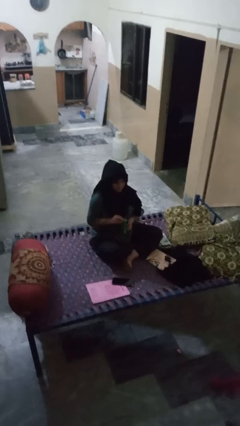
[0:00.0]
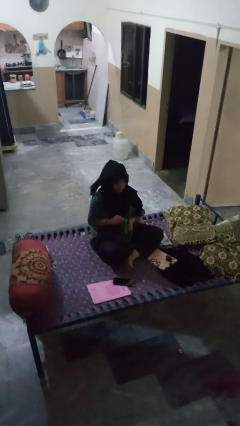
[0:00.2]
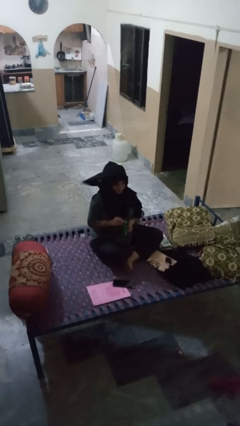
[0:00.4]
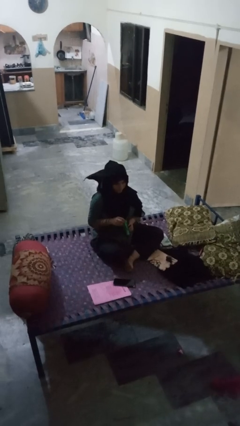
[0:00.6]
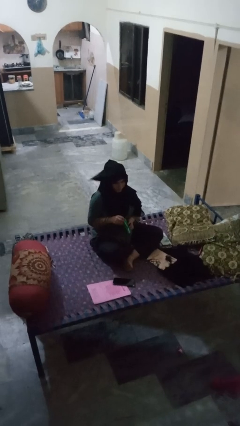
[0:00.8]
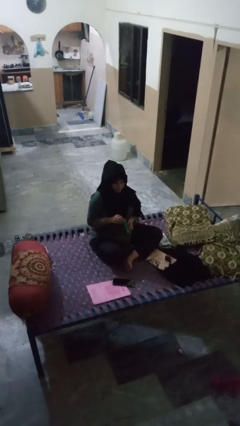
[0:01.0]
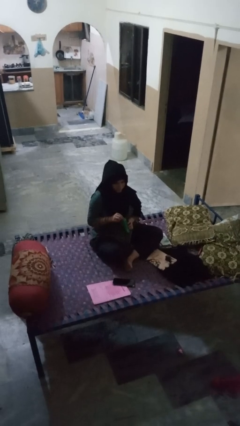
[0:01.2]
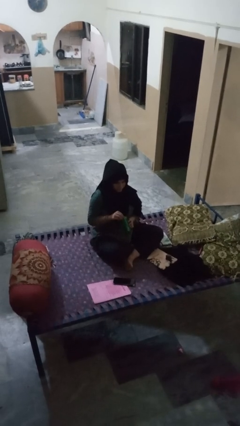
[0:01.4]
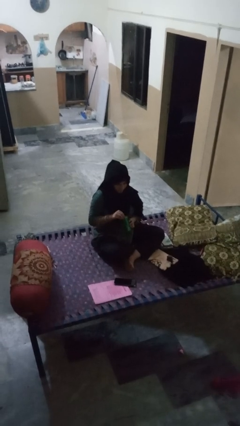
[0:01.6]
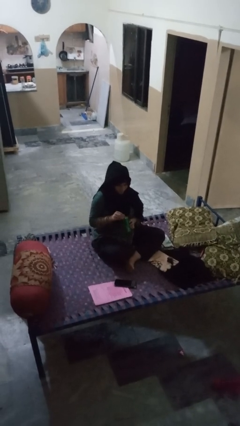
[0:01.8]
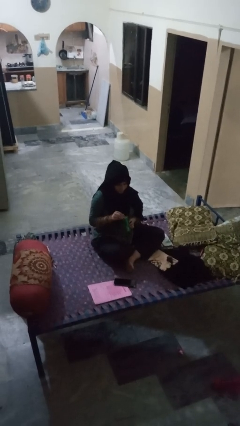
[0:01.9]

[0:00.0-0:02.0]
person opens can with can opener

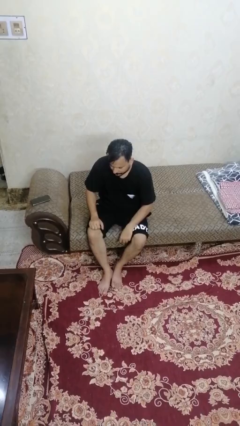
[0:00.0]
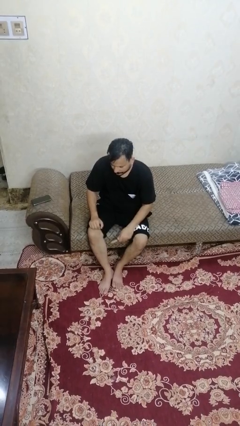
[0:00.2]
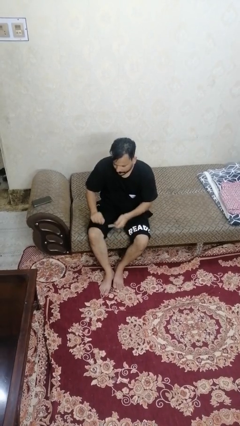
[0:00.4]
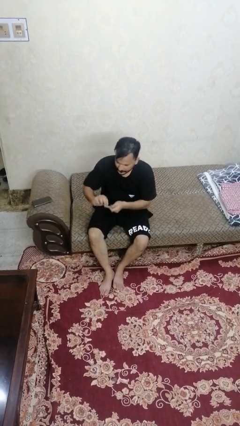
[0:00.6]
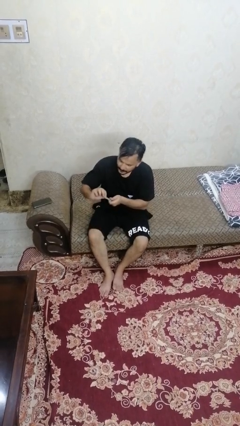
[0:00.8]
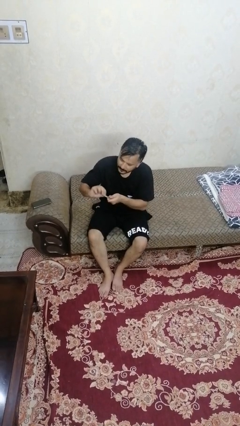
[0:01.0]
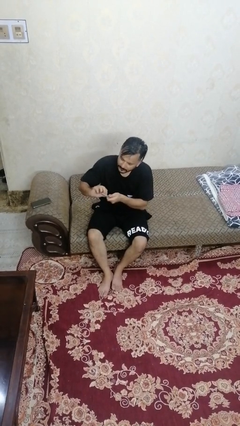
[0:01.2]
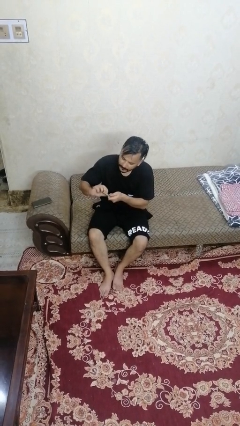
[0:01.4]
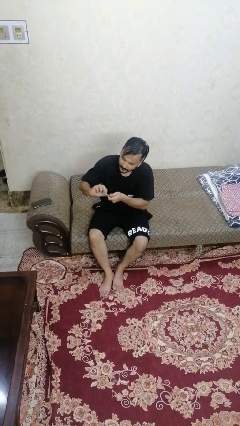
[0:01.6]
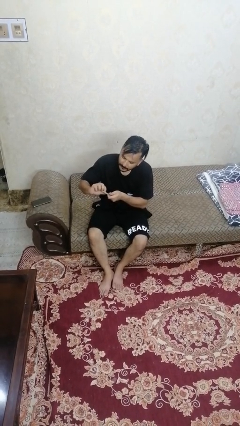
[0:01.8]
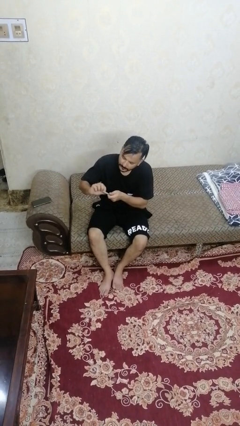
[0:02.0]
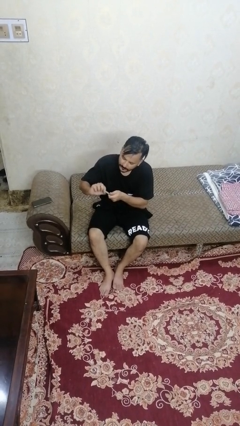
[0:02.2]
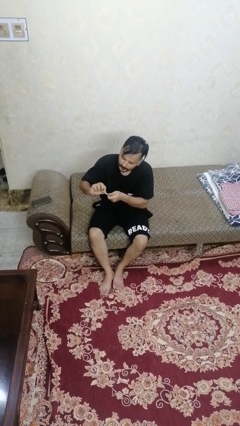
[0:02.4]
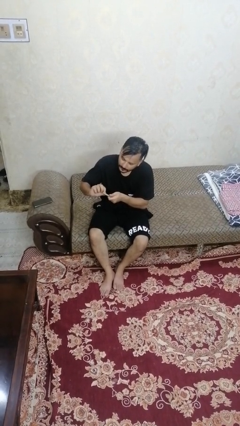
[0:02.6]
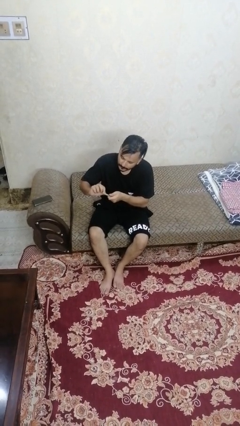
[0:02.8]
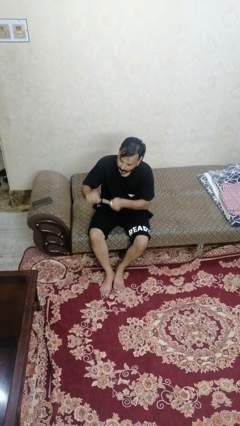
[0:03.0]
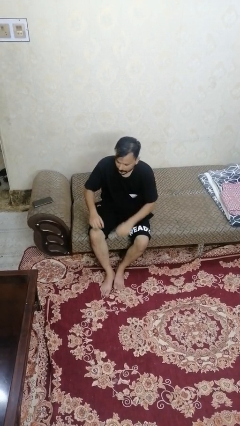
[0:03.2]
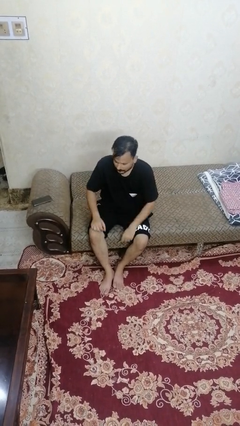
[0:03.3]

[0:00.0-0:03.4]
person files fingernails

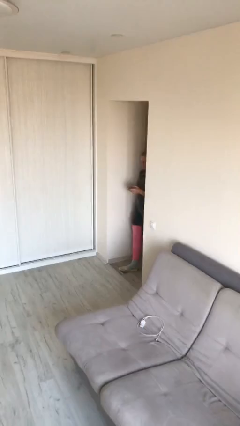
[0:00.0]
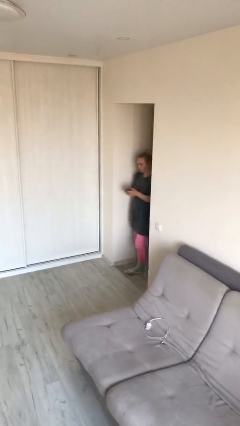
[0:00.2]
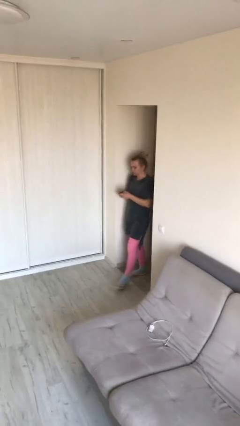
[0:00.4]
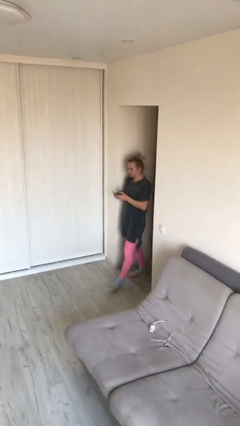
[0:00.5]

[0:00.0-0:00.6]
person enters scene through structure

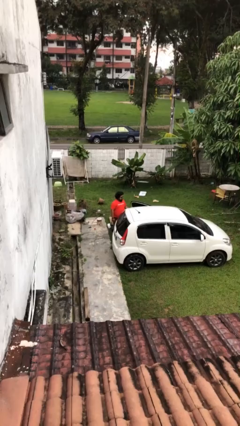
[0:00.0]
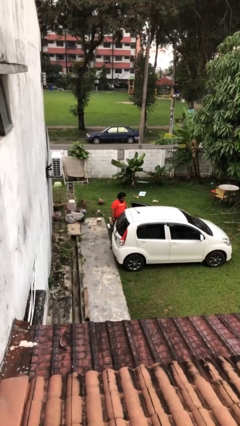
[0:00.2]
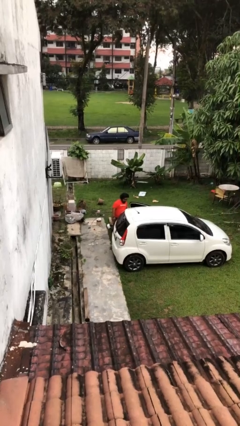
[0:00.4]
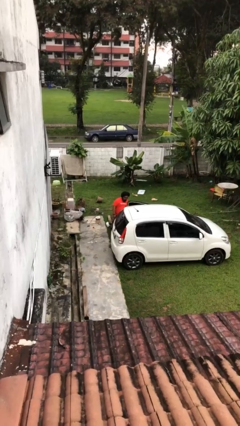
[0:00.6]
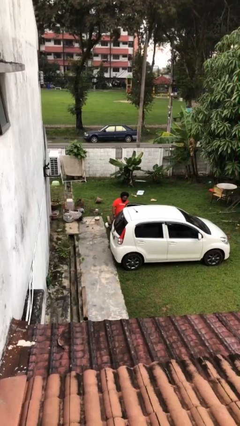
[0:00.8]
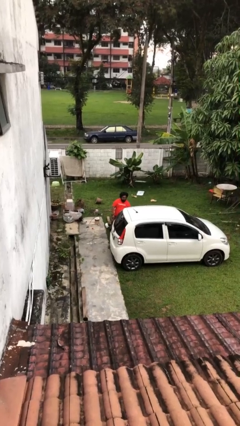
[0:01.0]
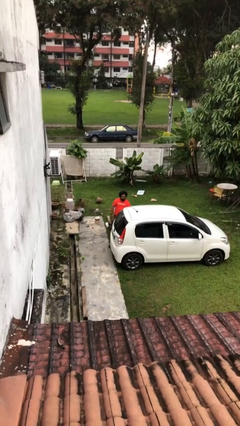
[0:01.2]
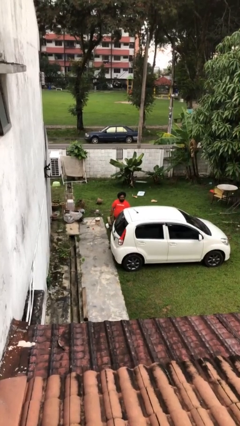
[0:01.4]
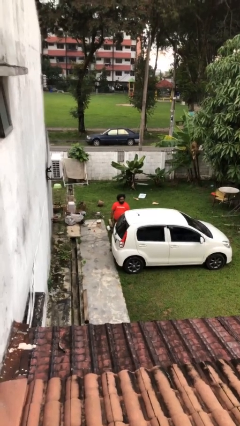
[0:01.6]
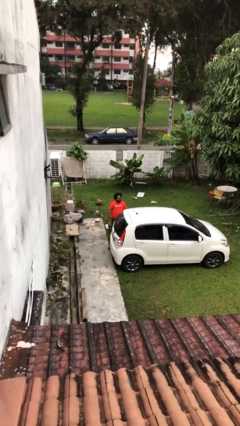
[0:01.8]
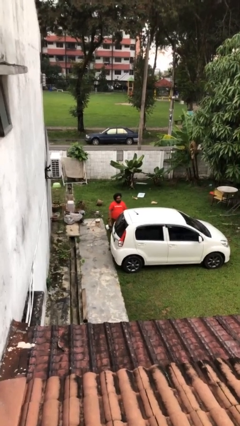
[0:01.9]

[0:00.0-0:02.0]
person closes car door

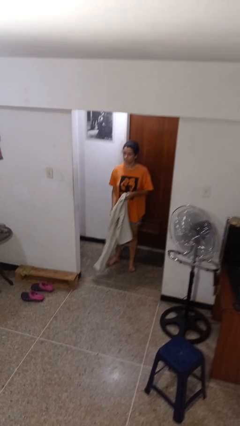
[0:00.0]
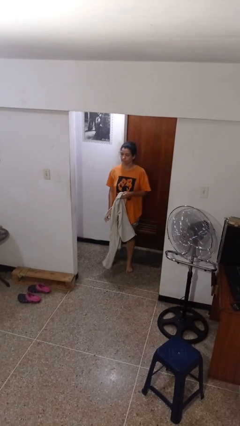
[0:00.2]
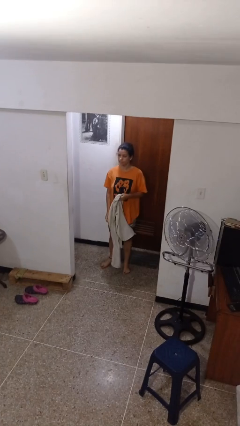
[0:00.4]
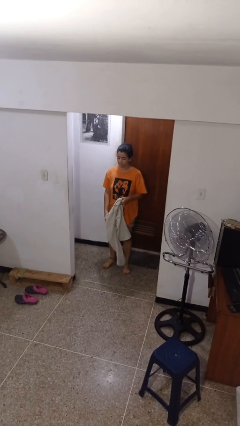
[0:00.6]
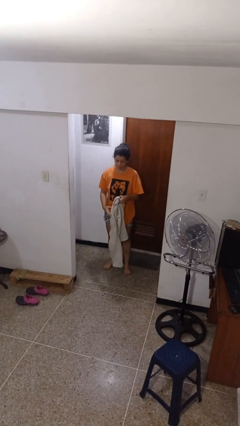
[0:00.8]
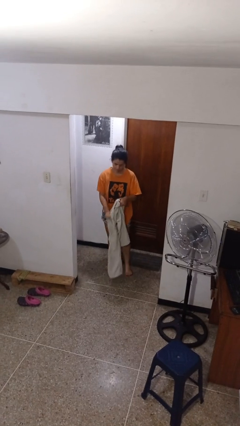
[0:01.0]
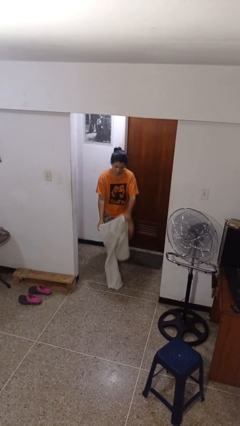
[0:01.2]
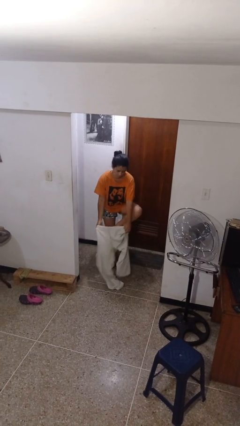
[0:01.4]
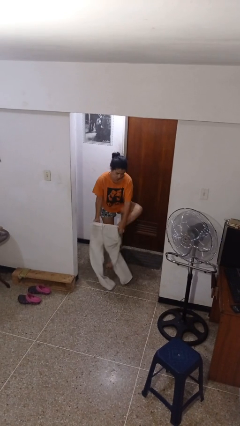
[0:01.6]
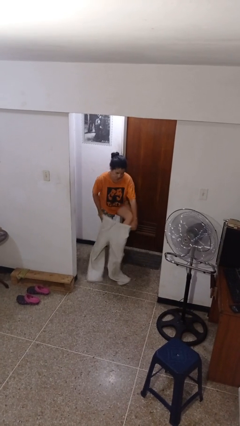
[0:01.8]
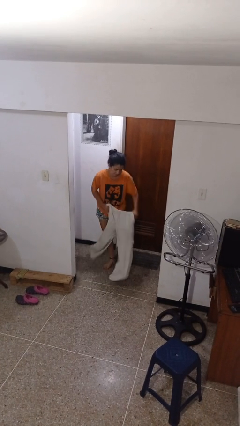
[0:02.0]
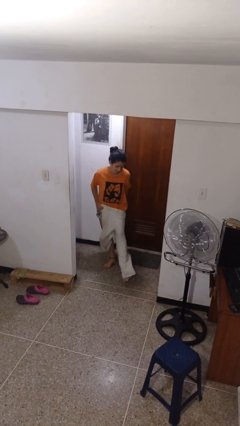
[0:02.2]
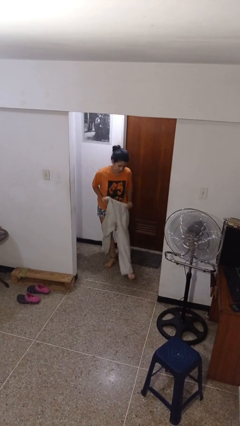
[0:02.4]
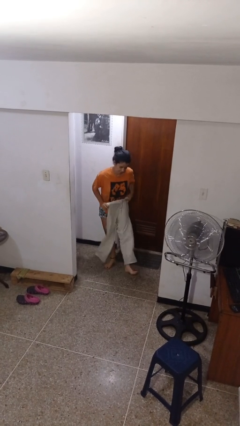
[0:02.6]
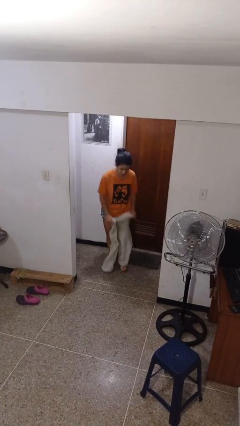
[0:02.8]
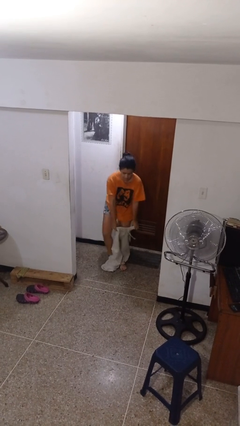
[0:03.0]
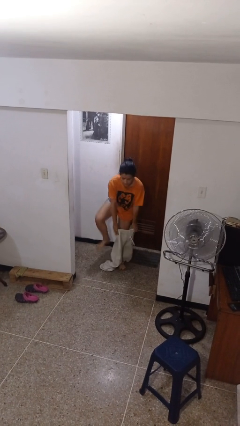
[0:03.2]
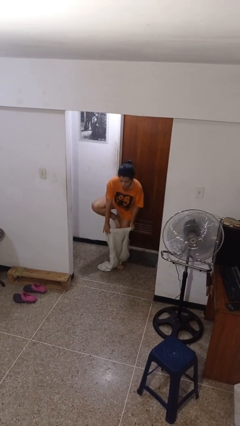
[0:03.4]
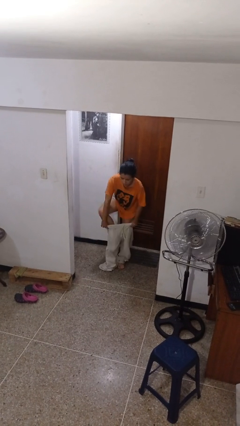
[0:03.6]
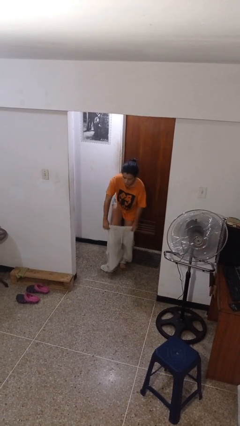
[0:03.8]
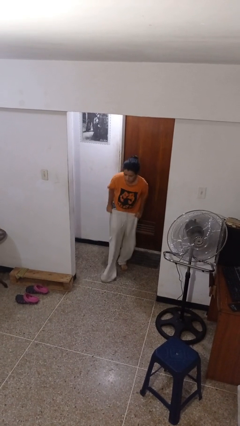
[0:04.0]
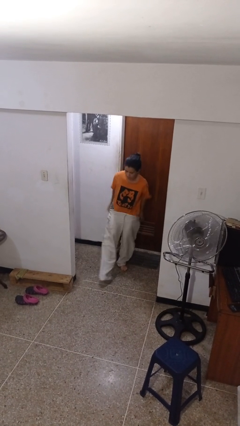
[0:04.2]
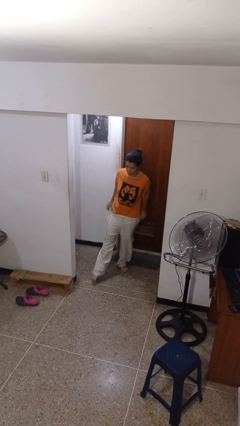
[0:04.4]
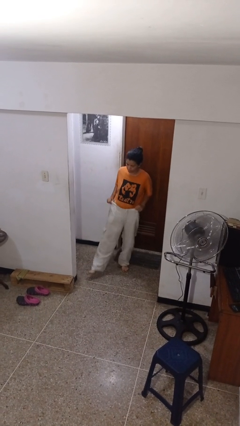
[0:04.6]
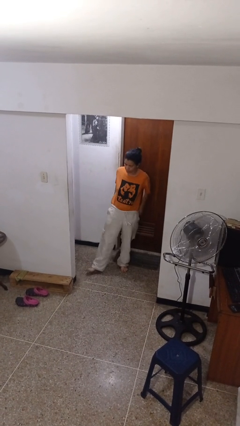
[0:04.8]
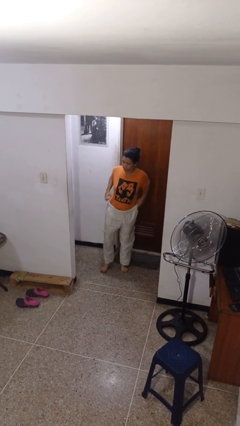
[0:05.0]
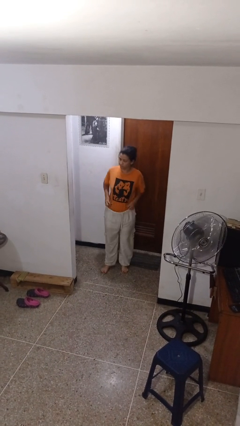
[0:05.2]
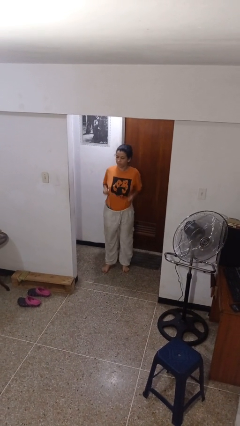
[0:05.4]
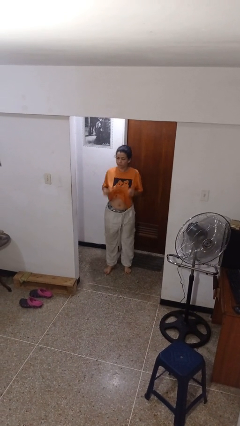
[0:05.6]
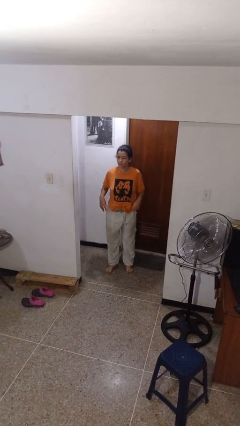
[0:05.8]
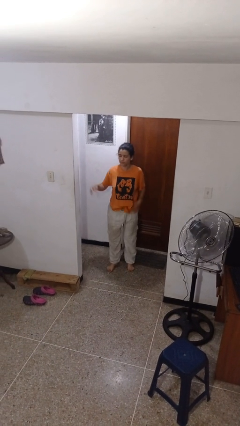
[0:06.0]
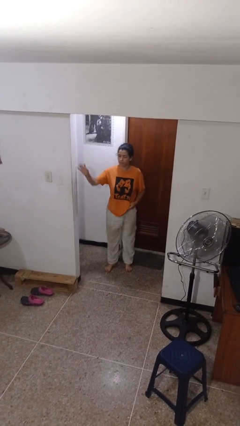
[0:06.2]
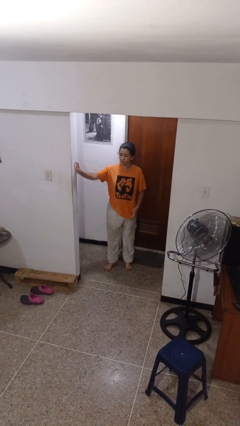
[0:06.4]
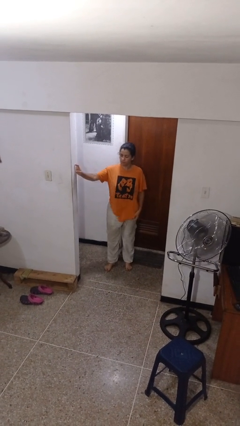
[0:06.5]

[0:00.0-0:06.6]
person puts on pants

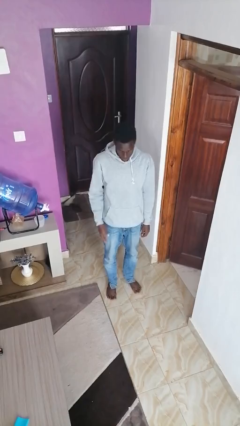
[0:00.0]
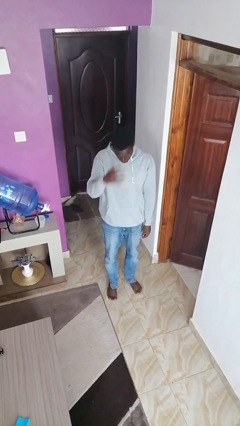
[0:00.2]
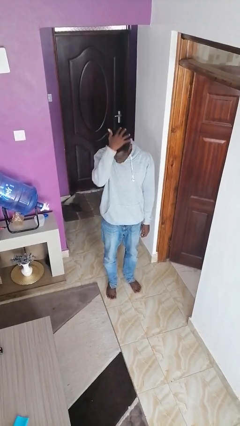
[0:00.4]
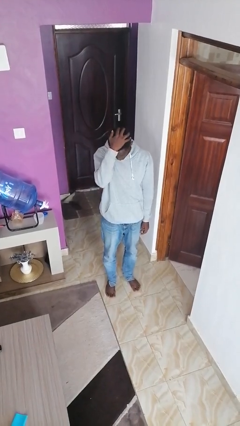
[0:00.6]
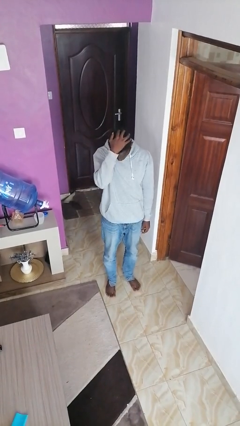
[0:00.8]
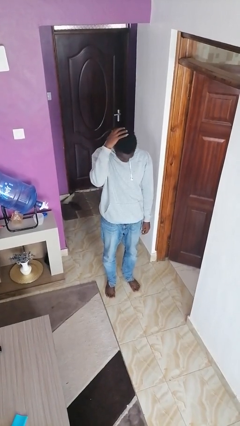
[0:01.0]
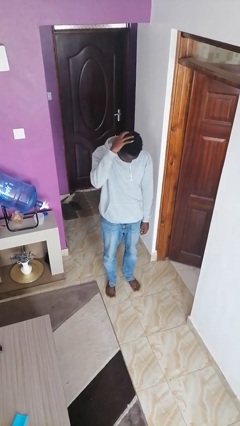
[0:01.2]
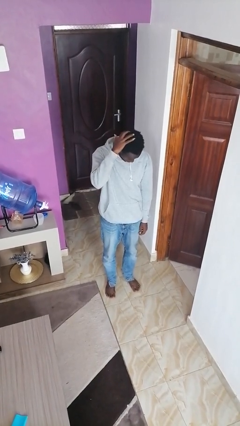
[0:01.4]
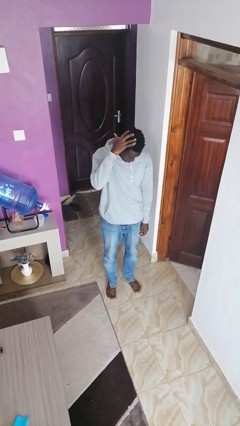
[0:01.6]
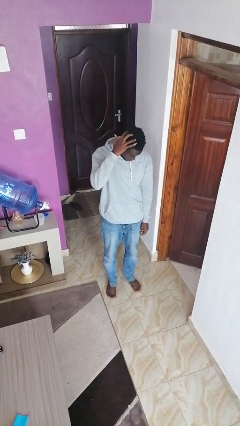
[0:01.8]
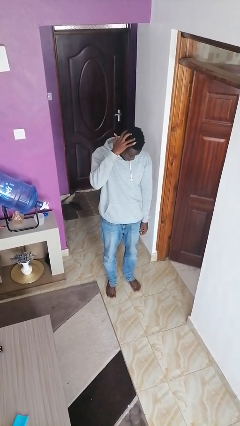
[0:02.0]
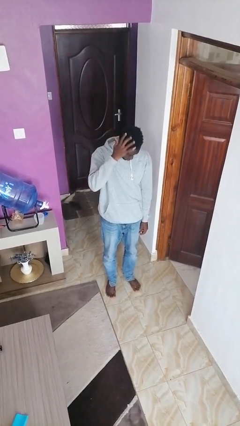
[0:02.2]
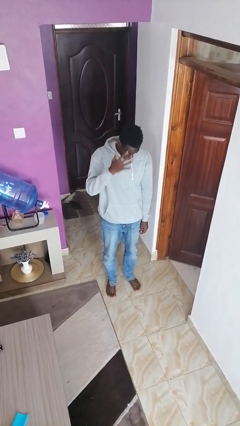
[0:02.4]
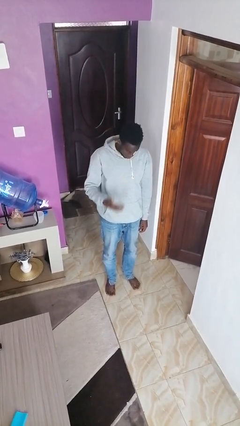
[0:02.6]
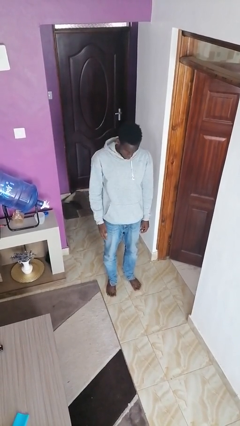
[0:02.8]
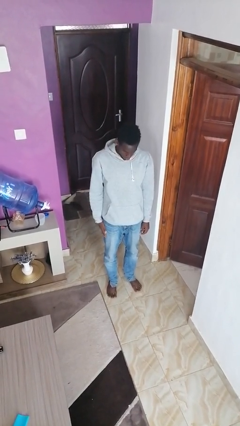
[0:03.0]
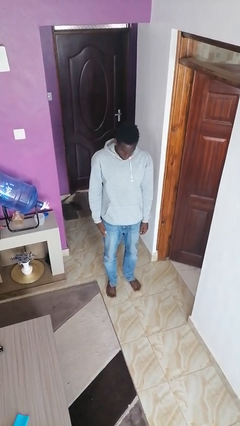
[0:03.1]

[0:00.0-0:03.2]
person strokes hair
